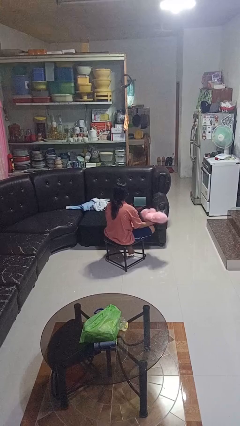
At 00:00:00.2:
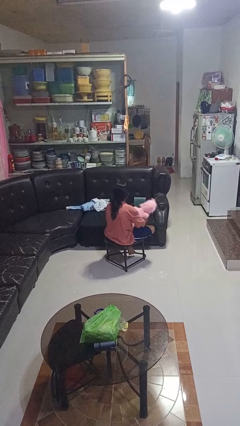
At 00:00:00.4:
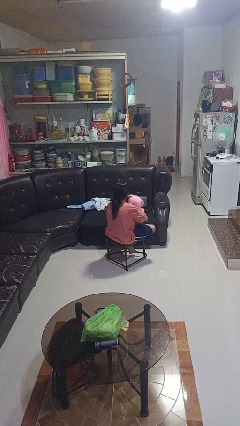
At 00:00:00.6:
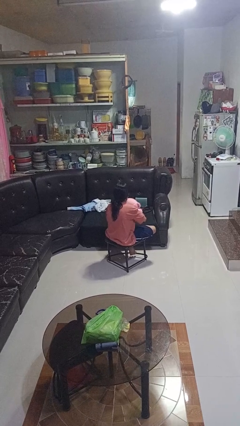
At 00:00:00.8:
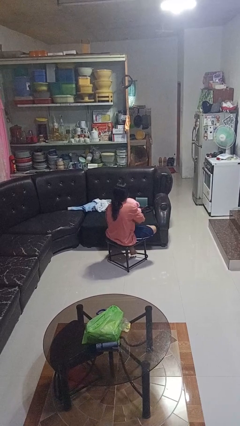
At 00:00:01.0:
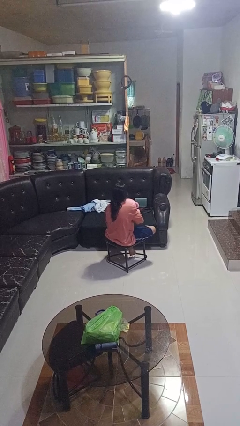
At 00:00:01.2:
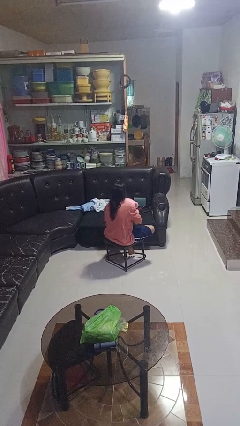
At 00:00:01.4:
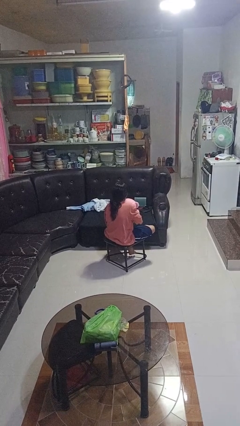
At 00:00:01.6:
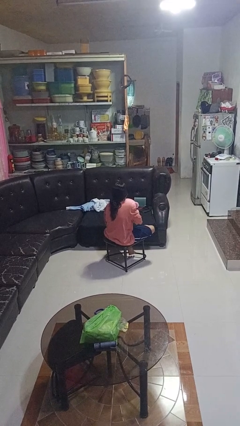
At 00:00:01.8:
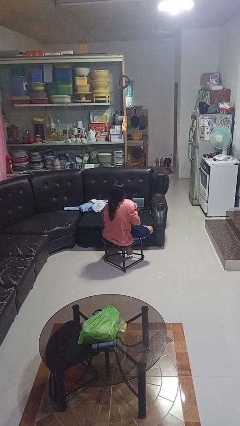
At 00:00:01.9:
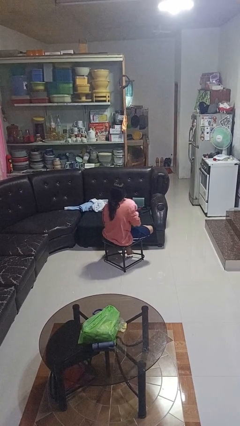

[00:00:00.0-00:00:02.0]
person hugs stuffed animal

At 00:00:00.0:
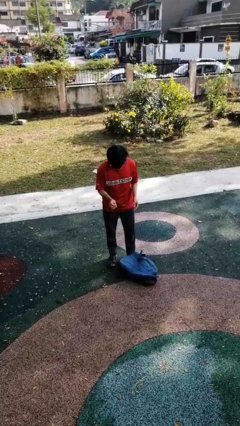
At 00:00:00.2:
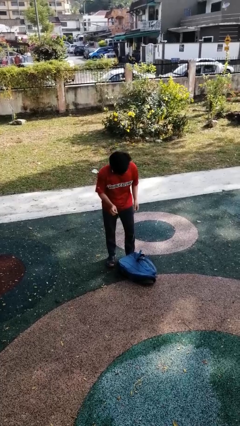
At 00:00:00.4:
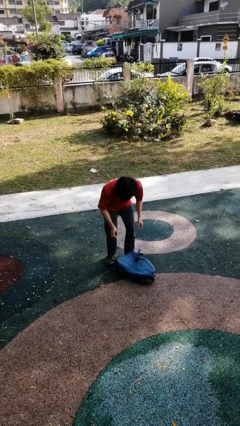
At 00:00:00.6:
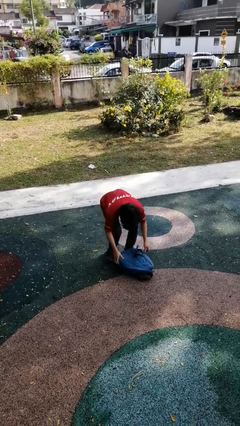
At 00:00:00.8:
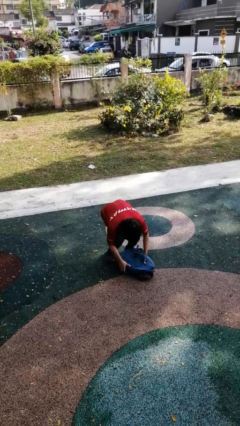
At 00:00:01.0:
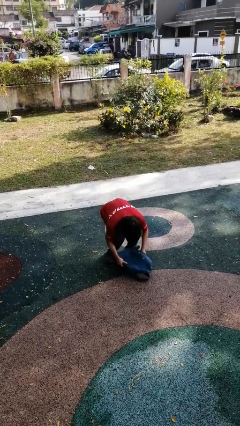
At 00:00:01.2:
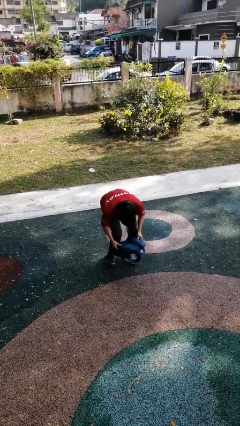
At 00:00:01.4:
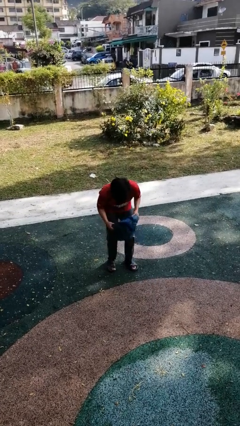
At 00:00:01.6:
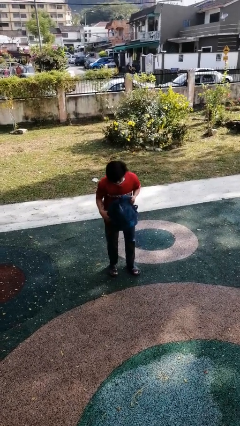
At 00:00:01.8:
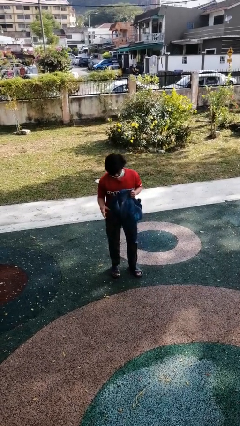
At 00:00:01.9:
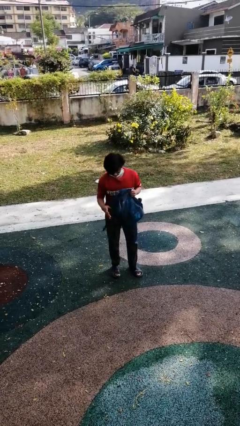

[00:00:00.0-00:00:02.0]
person picks up object from floor

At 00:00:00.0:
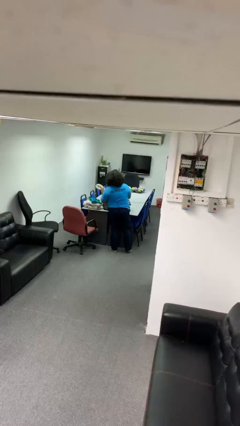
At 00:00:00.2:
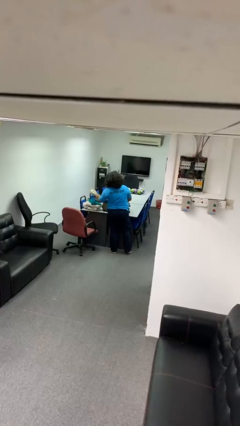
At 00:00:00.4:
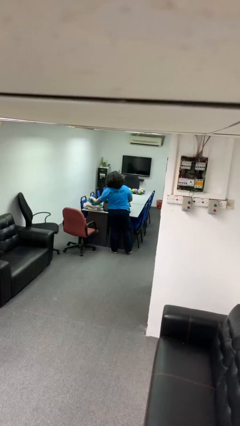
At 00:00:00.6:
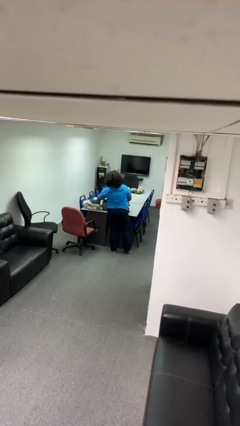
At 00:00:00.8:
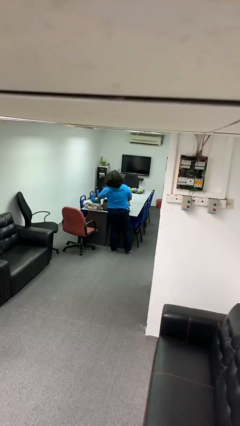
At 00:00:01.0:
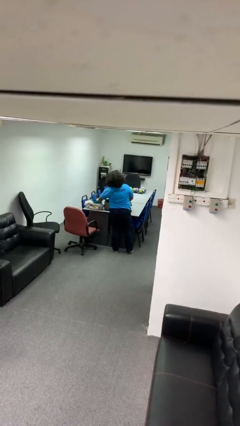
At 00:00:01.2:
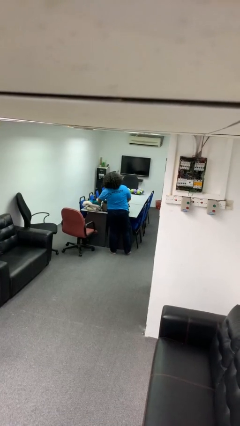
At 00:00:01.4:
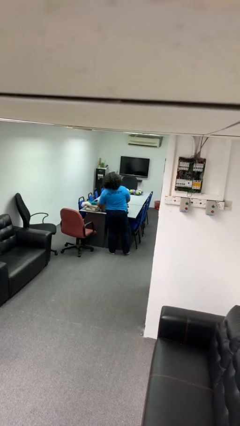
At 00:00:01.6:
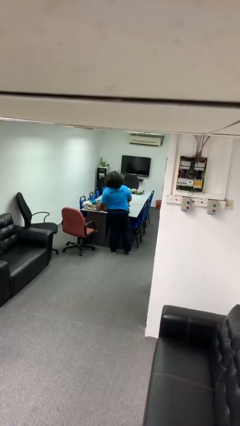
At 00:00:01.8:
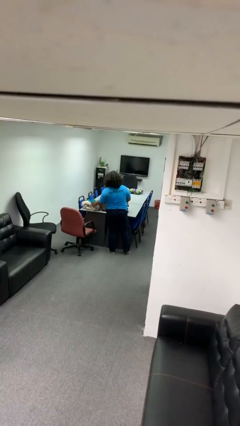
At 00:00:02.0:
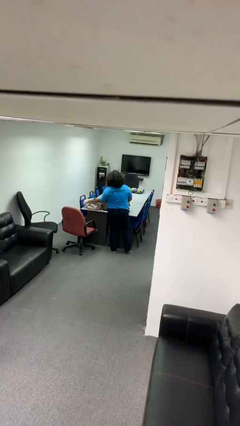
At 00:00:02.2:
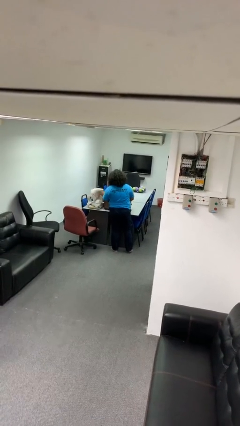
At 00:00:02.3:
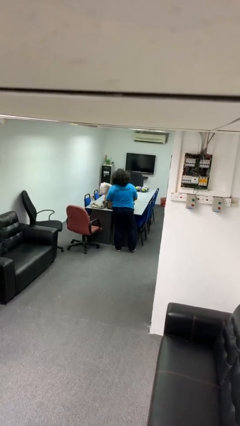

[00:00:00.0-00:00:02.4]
person unloads clothes from suitcase

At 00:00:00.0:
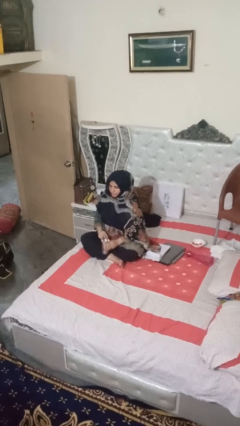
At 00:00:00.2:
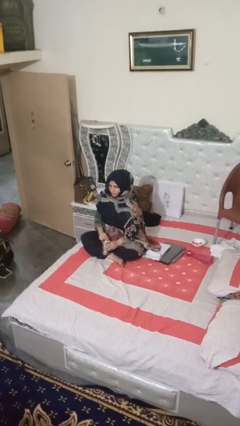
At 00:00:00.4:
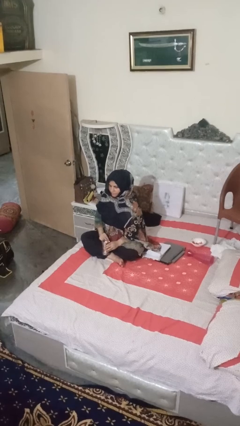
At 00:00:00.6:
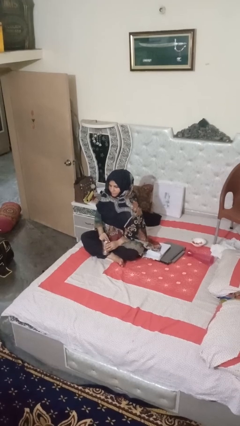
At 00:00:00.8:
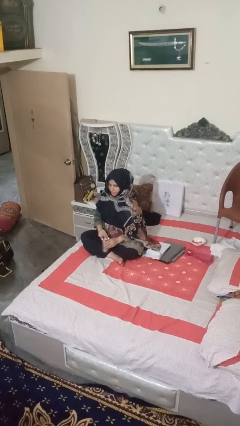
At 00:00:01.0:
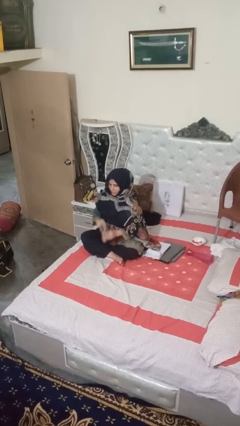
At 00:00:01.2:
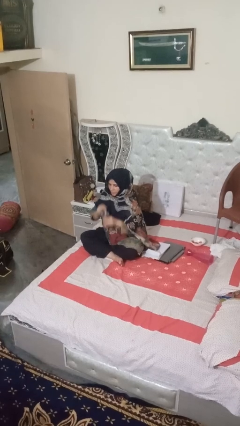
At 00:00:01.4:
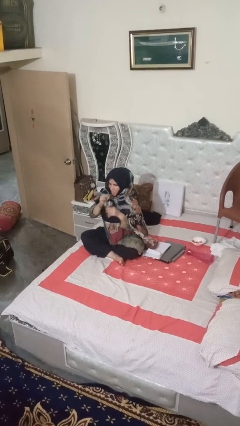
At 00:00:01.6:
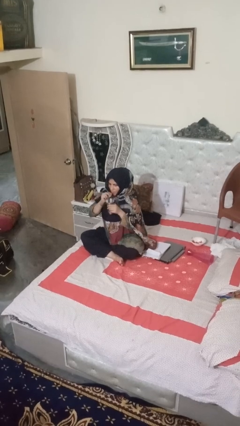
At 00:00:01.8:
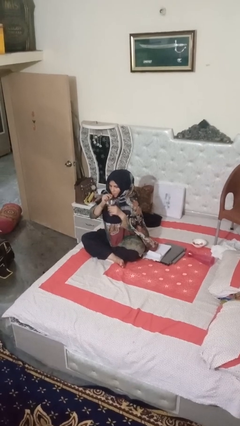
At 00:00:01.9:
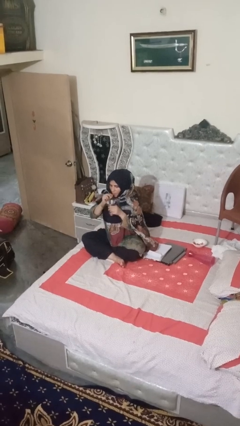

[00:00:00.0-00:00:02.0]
person drinks from straw

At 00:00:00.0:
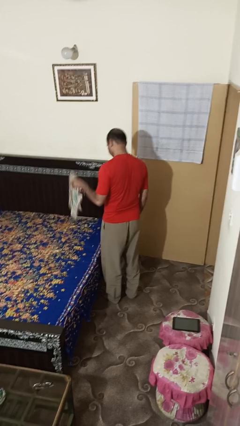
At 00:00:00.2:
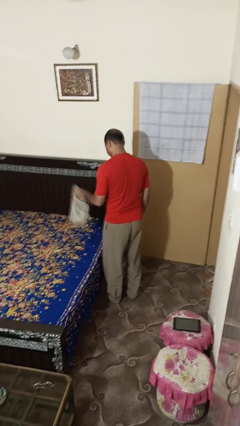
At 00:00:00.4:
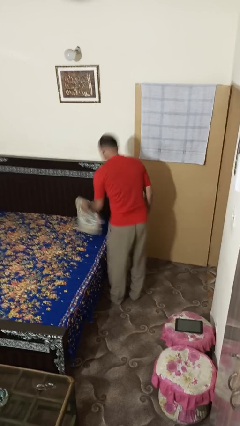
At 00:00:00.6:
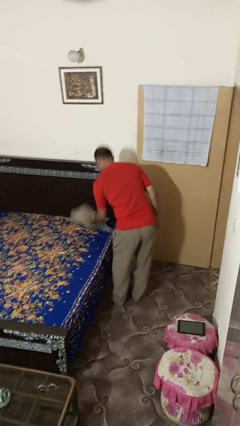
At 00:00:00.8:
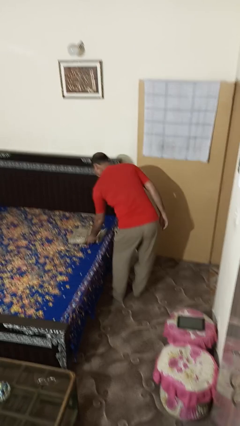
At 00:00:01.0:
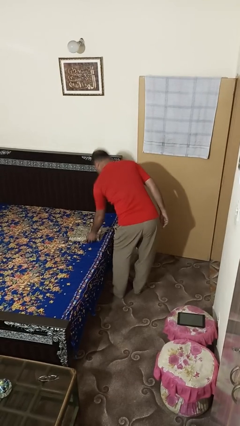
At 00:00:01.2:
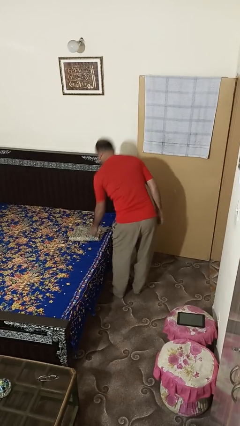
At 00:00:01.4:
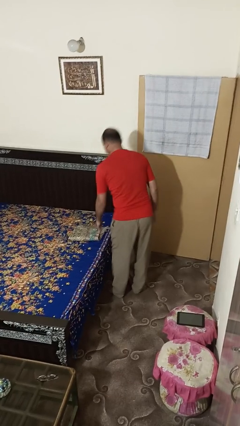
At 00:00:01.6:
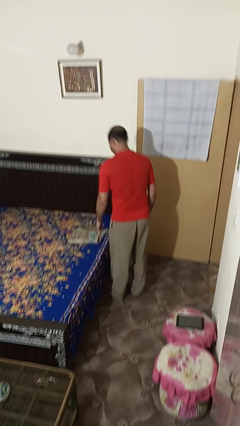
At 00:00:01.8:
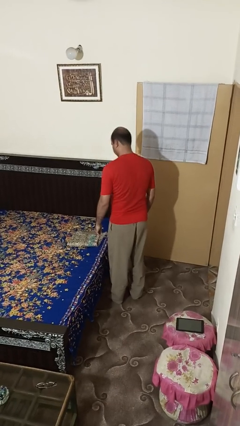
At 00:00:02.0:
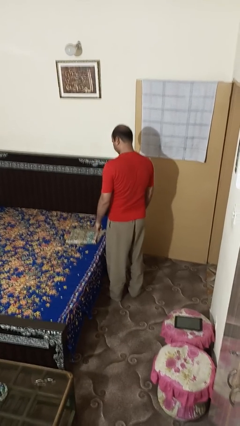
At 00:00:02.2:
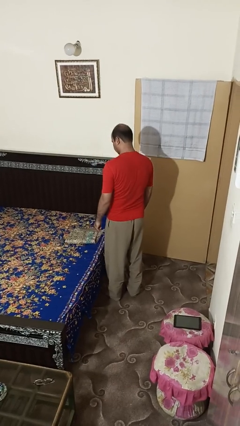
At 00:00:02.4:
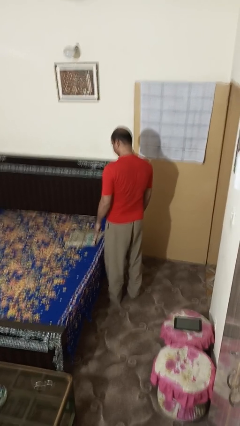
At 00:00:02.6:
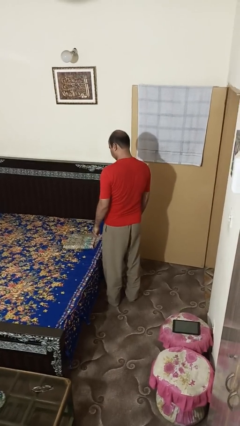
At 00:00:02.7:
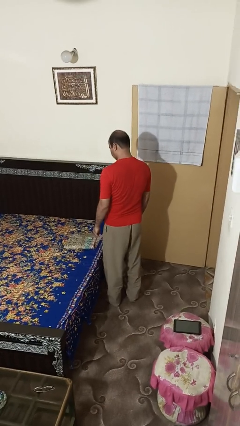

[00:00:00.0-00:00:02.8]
person puts down object on bed

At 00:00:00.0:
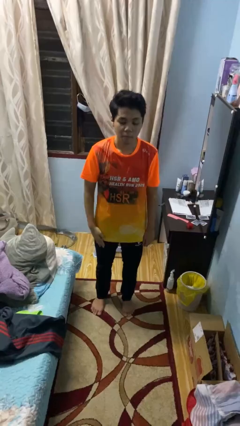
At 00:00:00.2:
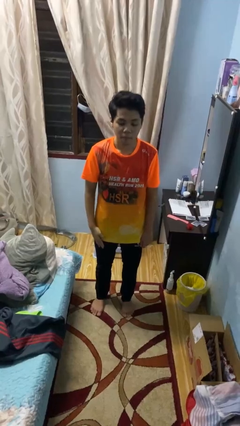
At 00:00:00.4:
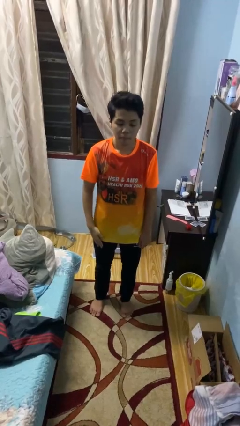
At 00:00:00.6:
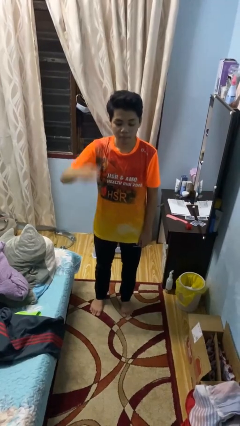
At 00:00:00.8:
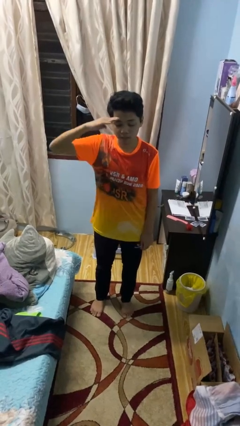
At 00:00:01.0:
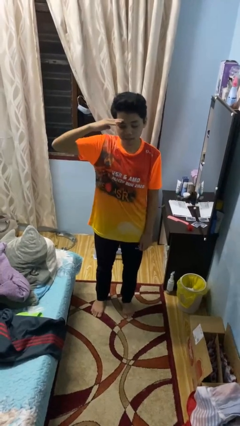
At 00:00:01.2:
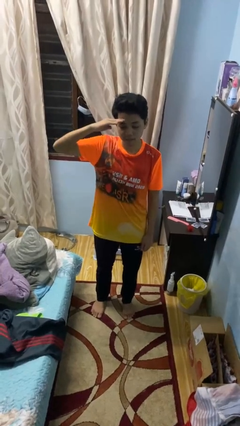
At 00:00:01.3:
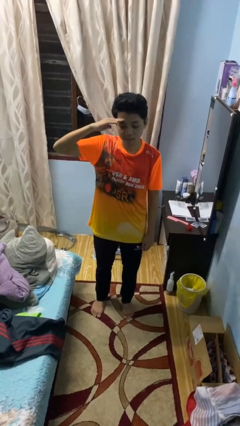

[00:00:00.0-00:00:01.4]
person salutes

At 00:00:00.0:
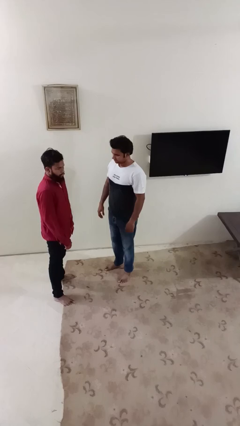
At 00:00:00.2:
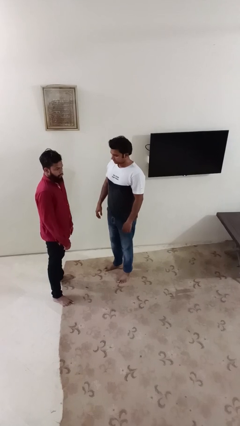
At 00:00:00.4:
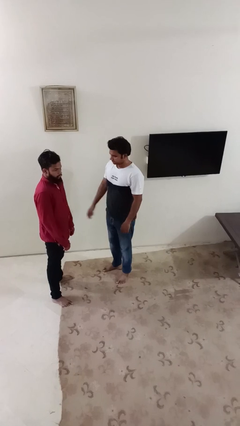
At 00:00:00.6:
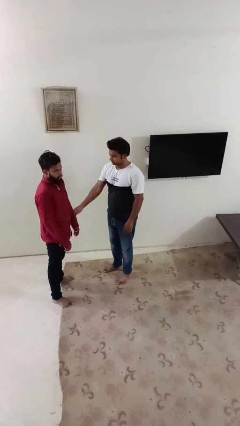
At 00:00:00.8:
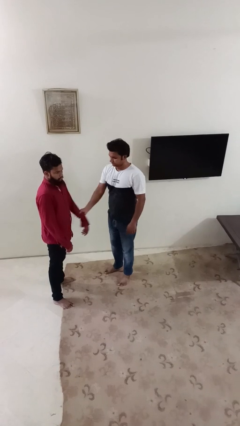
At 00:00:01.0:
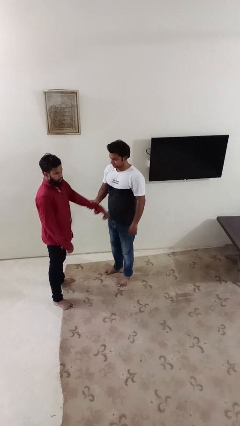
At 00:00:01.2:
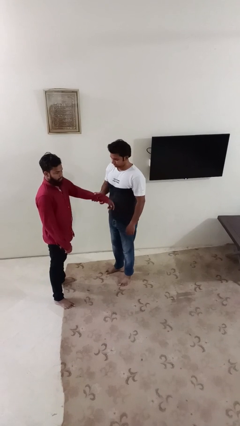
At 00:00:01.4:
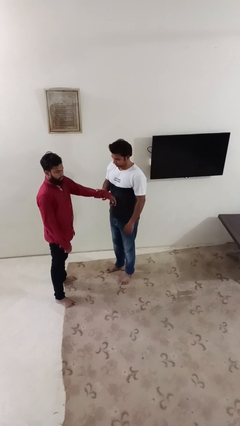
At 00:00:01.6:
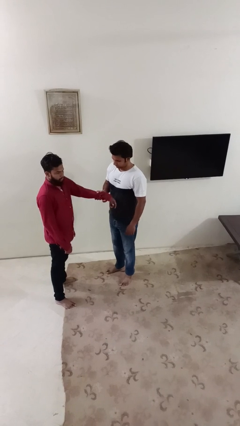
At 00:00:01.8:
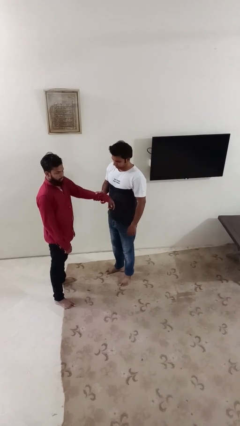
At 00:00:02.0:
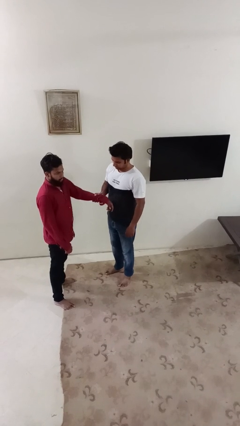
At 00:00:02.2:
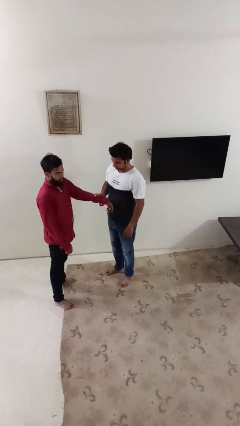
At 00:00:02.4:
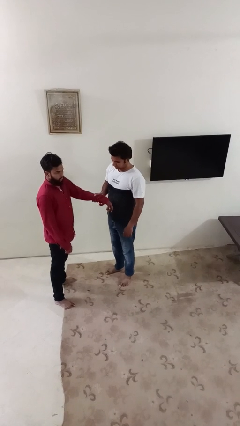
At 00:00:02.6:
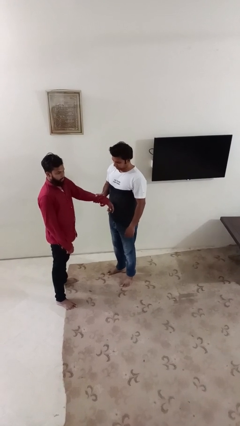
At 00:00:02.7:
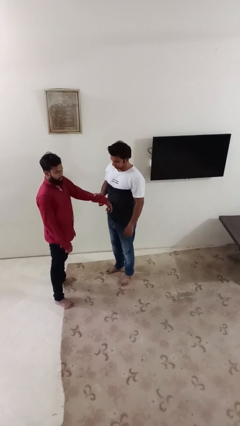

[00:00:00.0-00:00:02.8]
person grabs person by forearm

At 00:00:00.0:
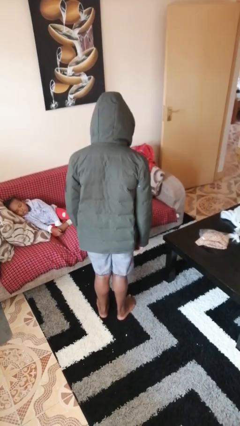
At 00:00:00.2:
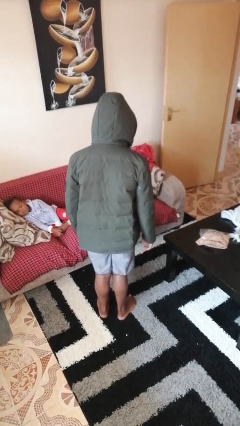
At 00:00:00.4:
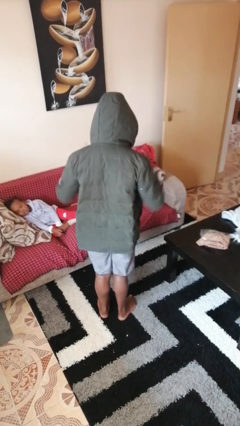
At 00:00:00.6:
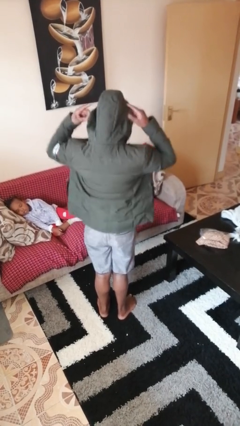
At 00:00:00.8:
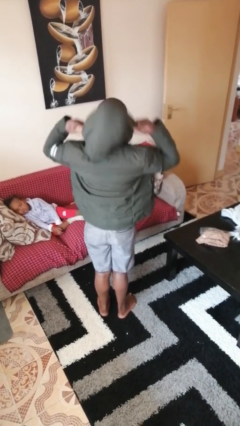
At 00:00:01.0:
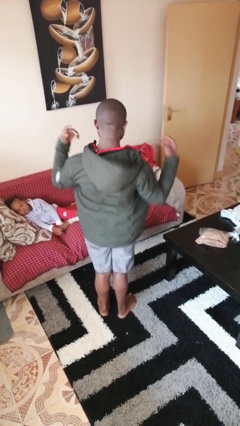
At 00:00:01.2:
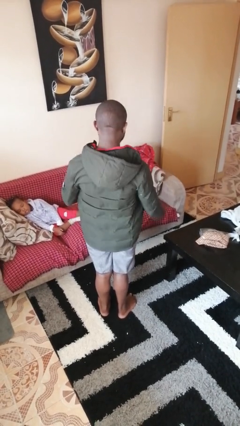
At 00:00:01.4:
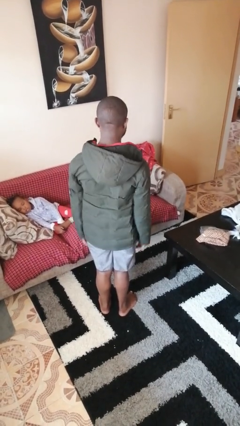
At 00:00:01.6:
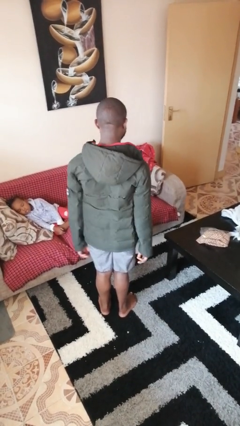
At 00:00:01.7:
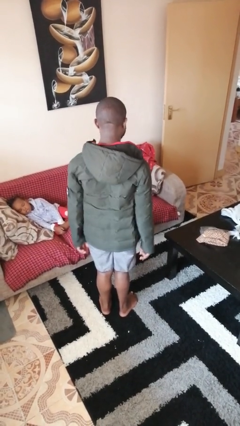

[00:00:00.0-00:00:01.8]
person takes off hoodie
